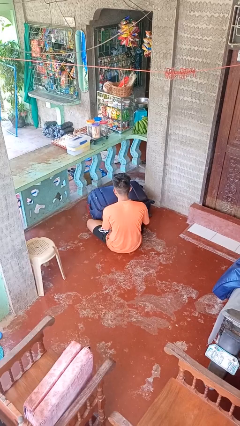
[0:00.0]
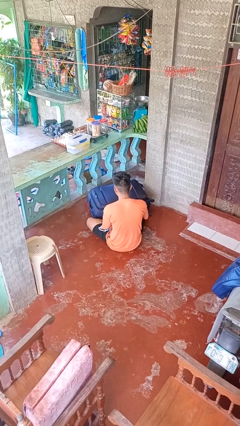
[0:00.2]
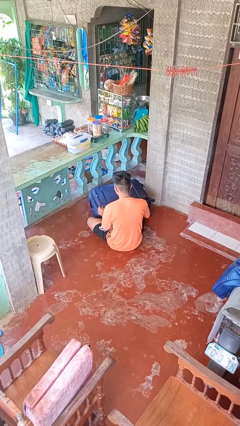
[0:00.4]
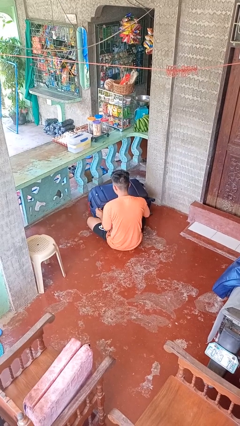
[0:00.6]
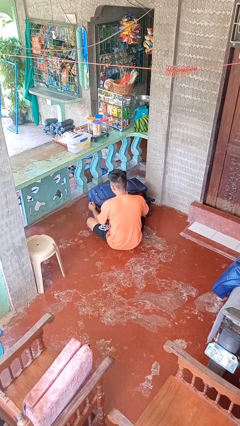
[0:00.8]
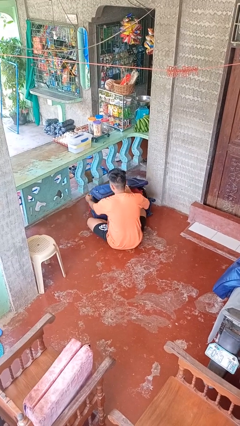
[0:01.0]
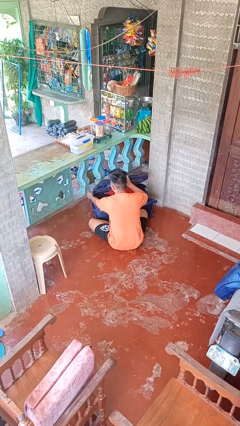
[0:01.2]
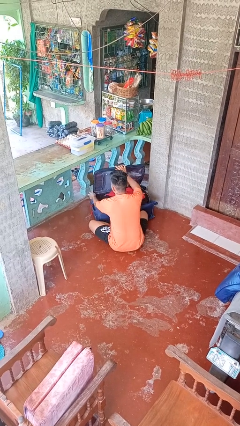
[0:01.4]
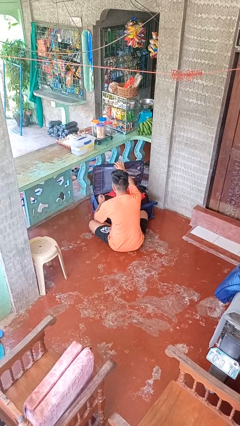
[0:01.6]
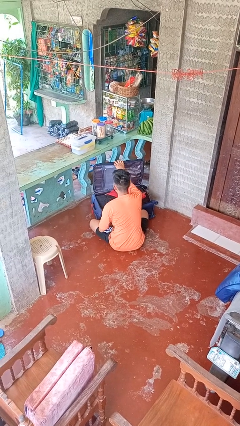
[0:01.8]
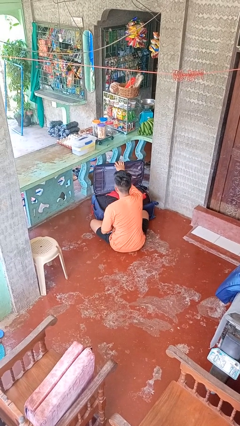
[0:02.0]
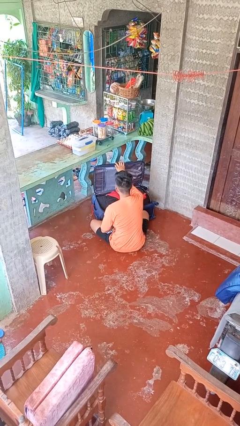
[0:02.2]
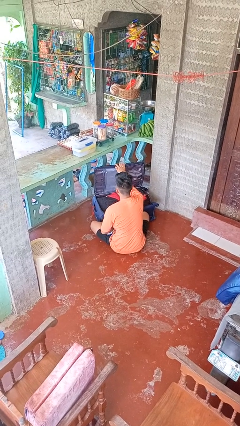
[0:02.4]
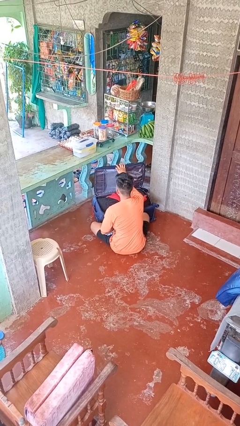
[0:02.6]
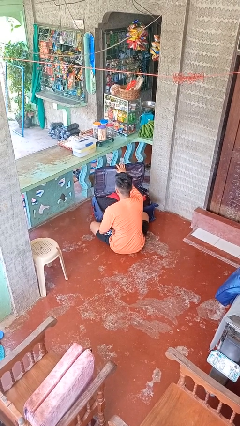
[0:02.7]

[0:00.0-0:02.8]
person opens suitcase

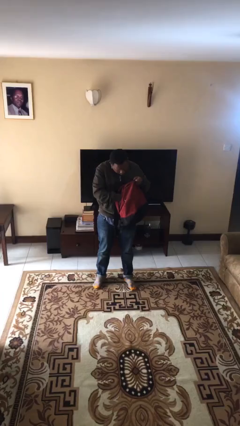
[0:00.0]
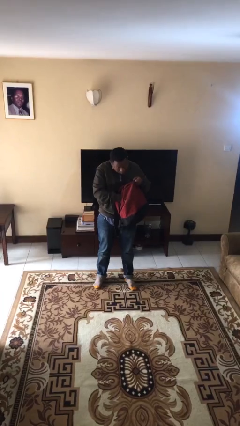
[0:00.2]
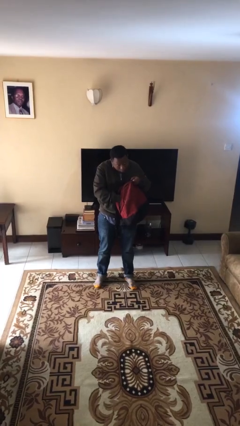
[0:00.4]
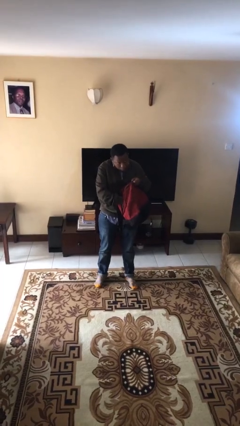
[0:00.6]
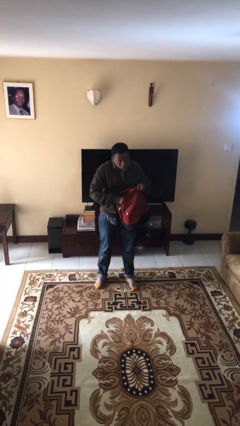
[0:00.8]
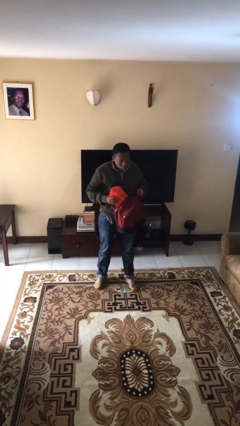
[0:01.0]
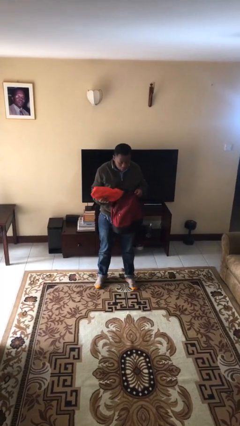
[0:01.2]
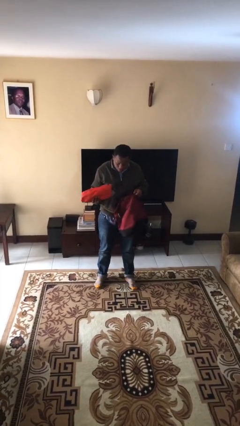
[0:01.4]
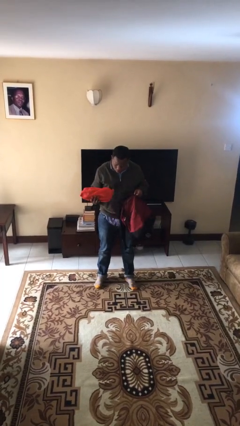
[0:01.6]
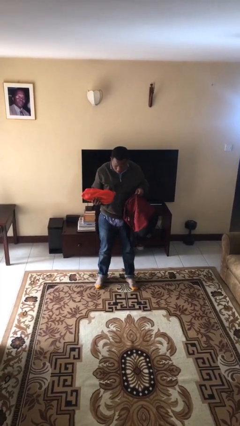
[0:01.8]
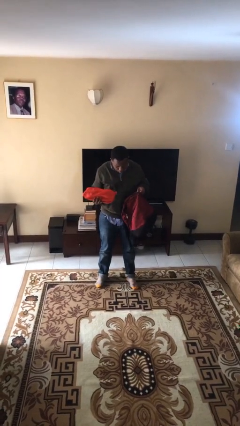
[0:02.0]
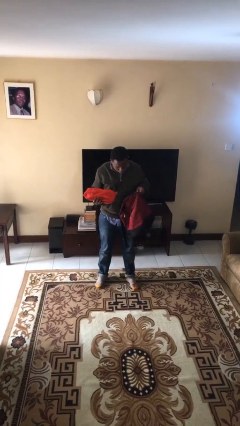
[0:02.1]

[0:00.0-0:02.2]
person takes object from backpack

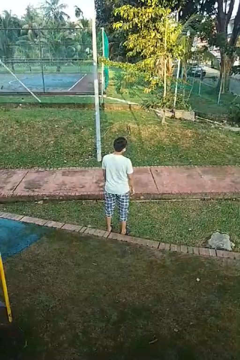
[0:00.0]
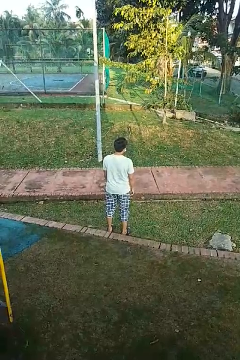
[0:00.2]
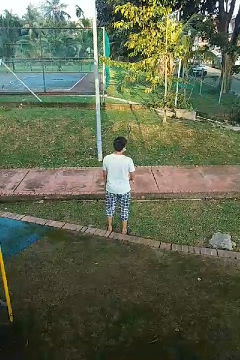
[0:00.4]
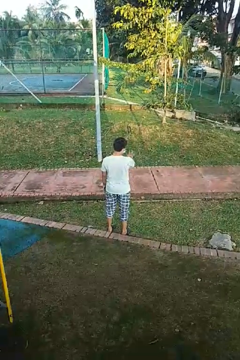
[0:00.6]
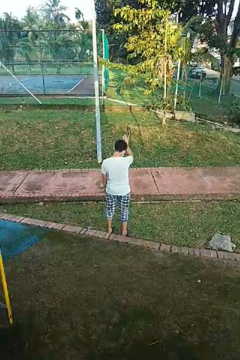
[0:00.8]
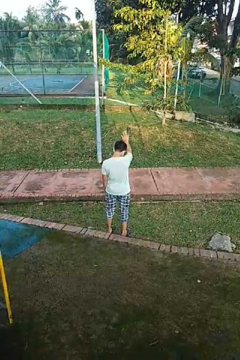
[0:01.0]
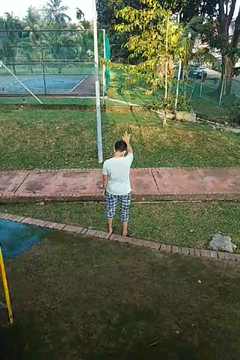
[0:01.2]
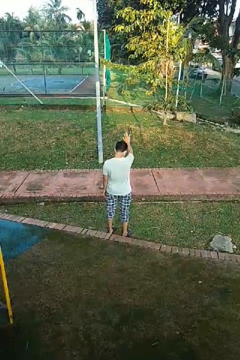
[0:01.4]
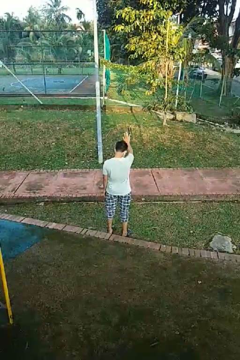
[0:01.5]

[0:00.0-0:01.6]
person gestures stop

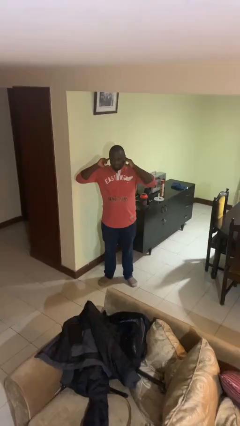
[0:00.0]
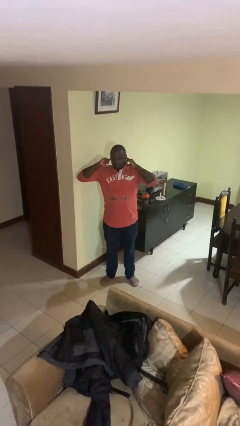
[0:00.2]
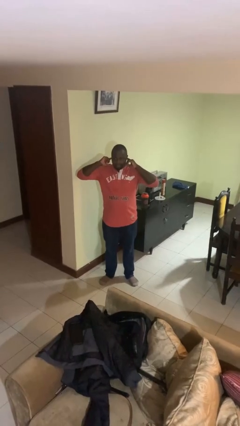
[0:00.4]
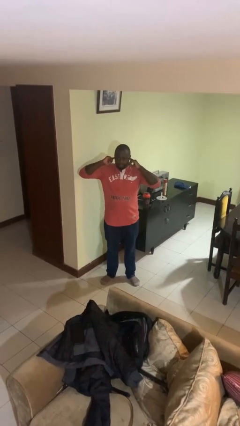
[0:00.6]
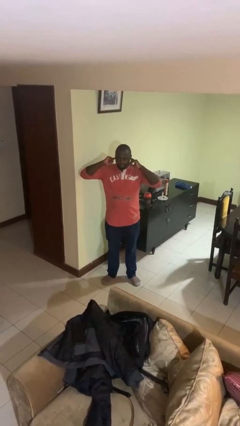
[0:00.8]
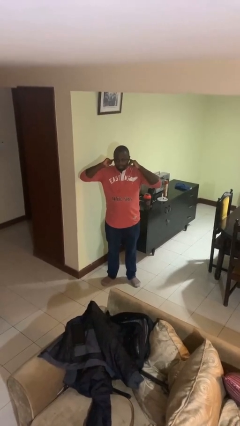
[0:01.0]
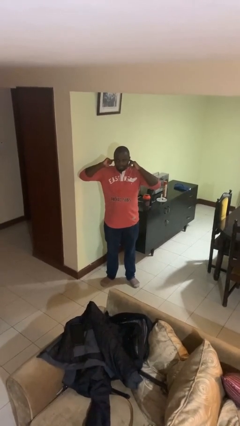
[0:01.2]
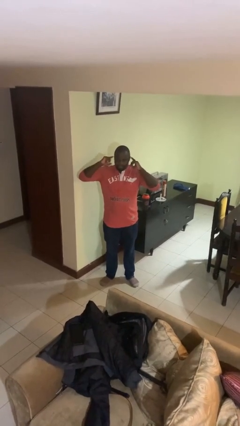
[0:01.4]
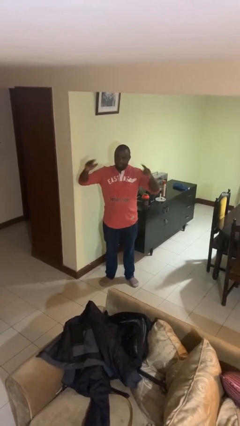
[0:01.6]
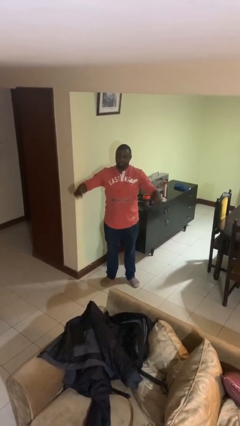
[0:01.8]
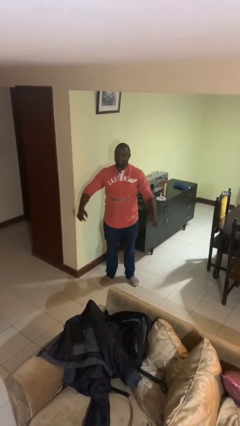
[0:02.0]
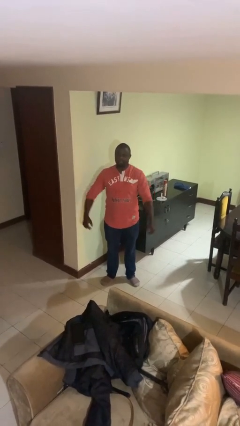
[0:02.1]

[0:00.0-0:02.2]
person puts fingers in ear

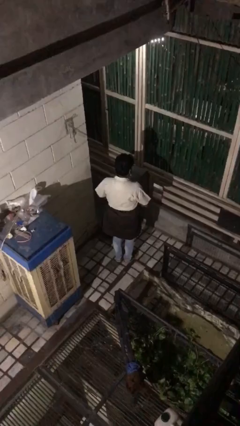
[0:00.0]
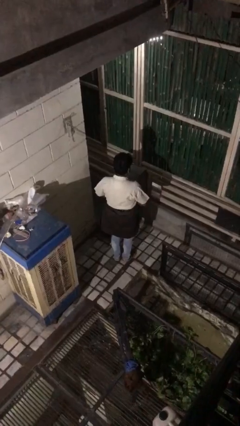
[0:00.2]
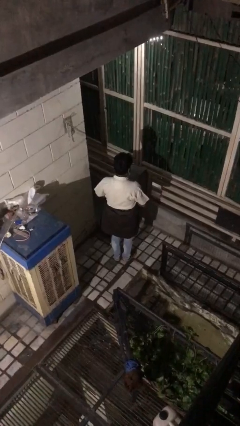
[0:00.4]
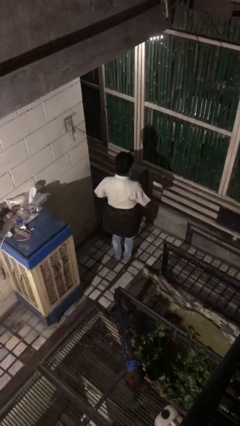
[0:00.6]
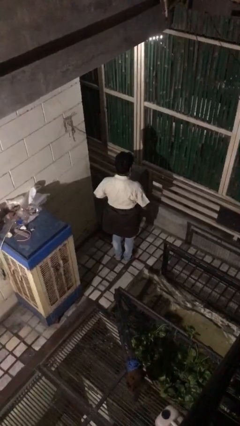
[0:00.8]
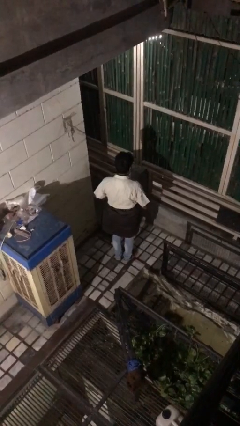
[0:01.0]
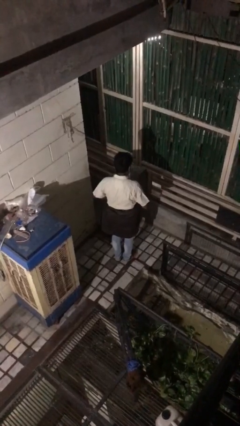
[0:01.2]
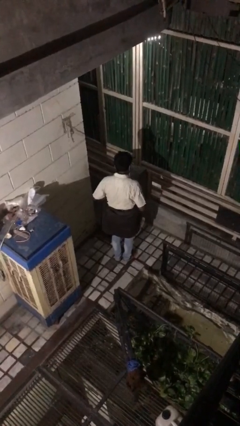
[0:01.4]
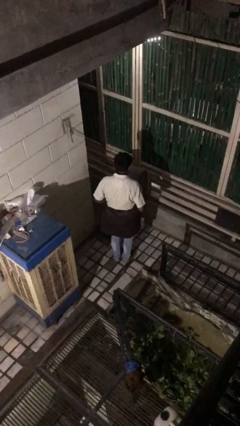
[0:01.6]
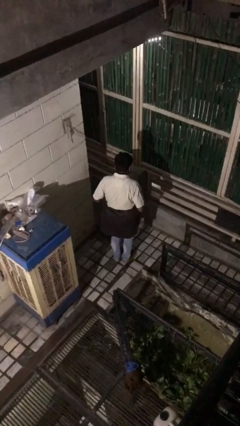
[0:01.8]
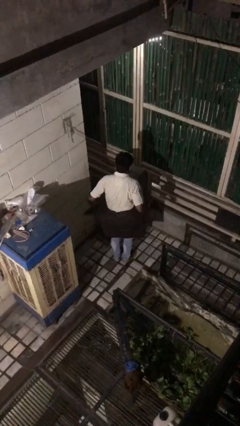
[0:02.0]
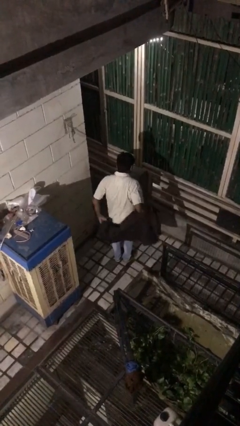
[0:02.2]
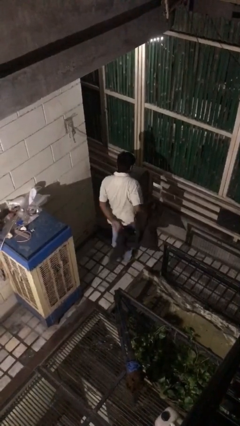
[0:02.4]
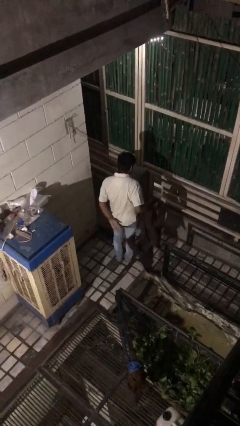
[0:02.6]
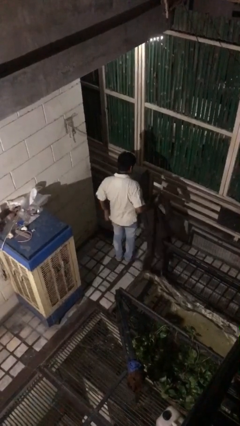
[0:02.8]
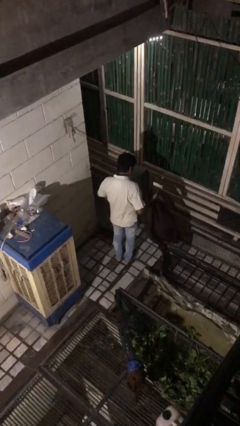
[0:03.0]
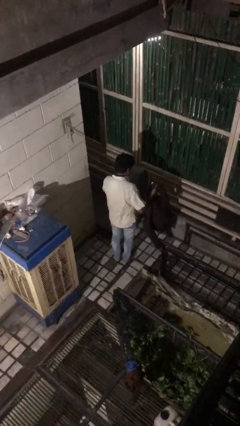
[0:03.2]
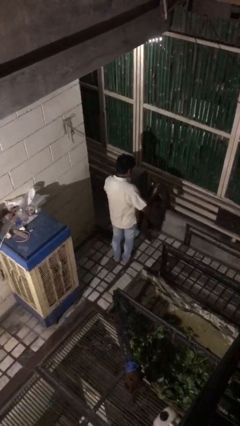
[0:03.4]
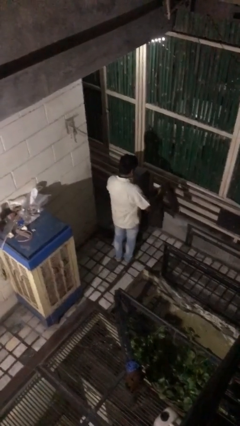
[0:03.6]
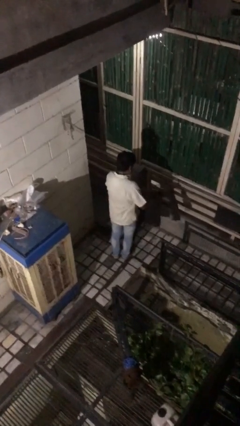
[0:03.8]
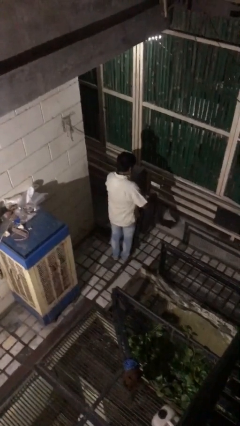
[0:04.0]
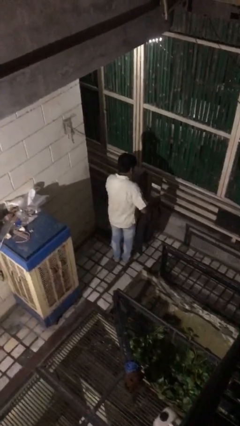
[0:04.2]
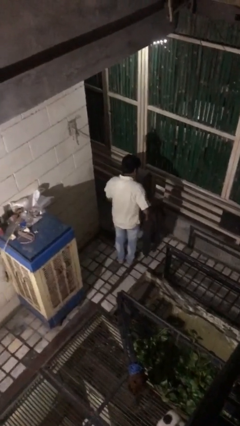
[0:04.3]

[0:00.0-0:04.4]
person unties jacket around waist

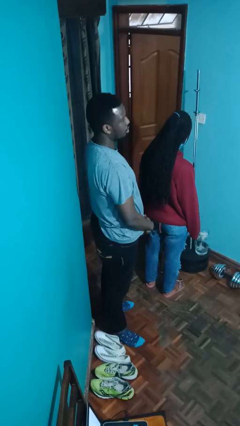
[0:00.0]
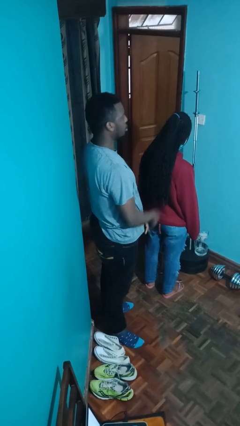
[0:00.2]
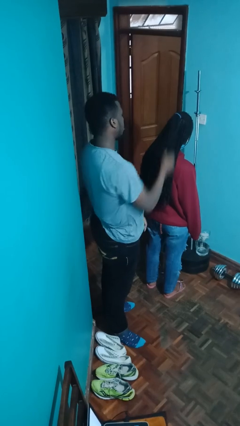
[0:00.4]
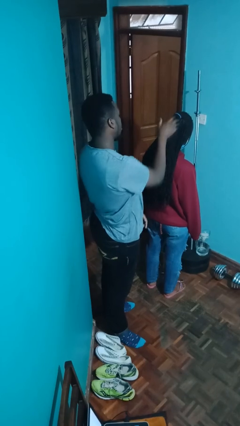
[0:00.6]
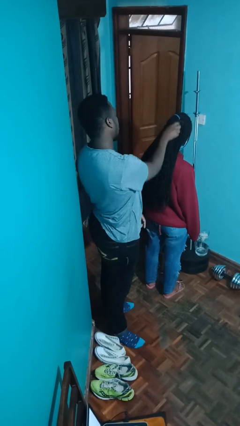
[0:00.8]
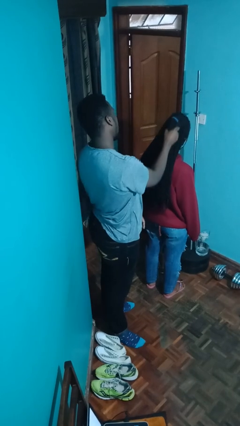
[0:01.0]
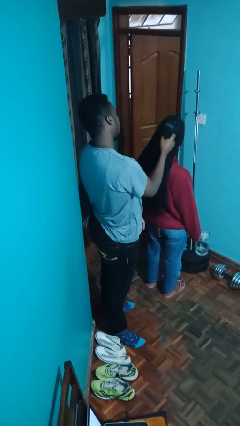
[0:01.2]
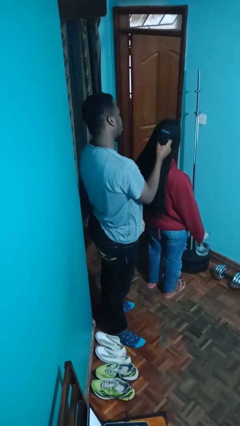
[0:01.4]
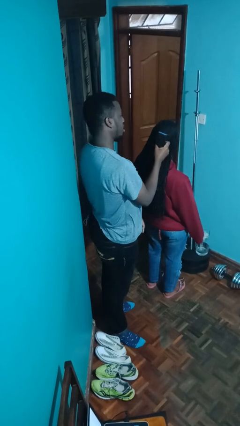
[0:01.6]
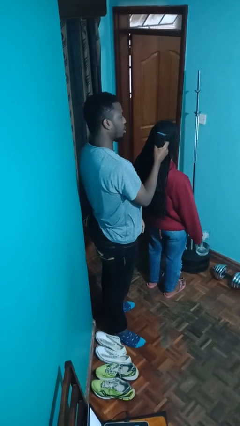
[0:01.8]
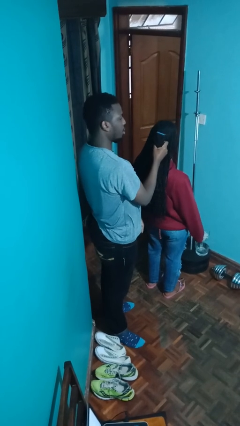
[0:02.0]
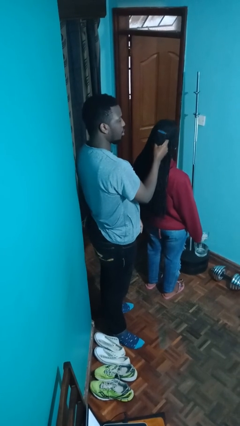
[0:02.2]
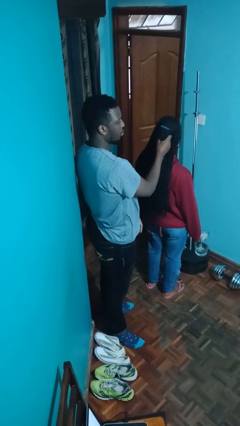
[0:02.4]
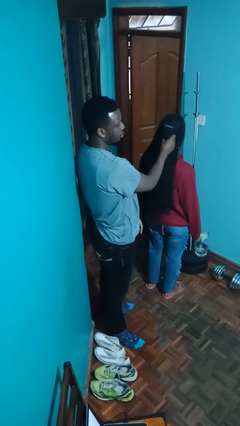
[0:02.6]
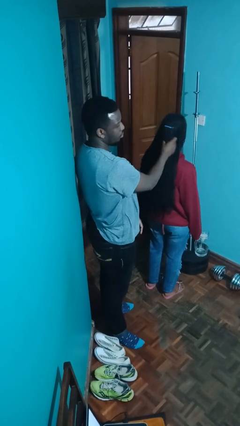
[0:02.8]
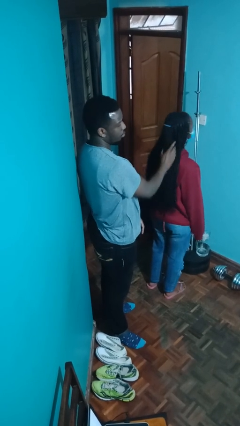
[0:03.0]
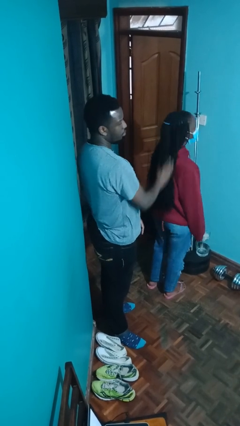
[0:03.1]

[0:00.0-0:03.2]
person grabs person by hair

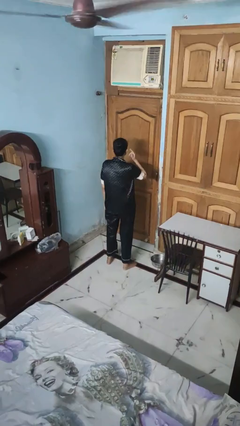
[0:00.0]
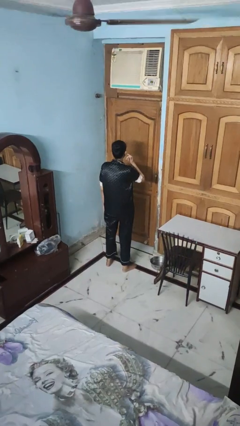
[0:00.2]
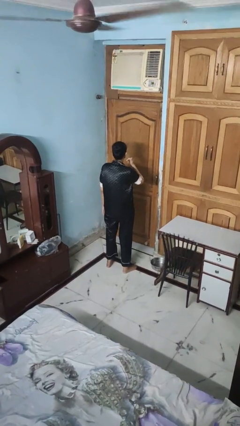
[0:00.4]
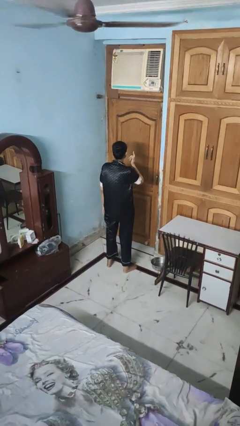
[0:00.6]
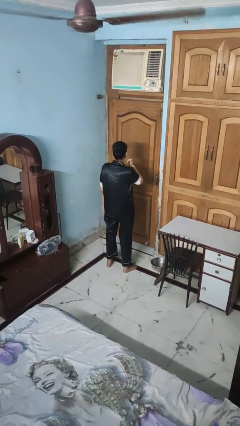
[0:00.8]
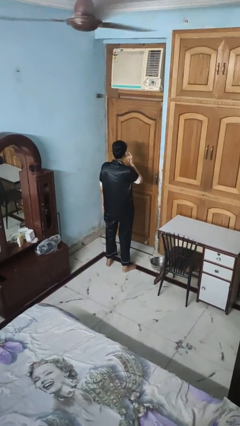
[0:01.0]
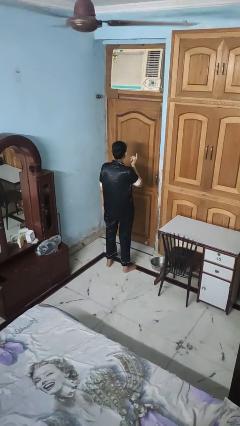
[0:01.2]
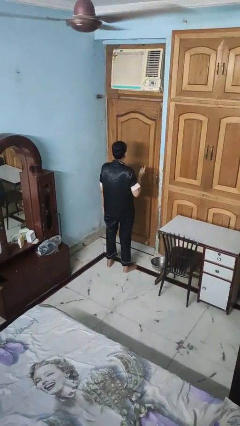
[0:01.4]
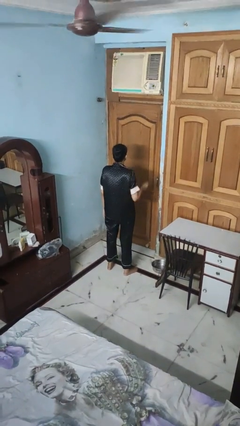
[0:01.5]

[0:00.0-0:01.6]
person touches earlobe
